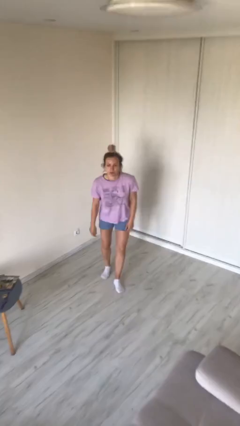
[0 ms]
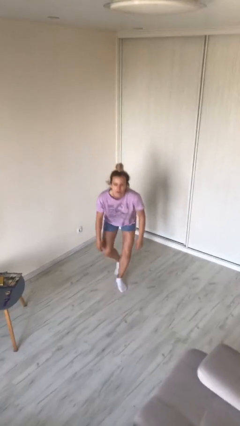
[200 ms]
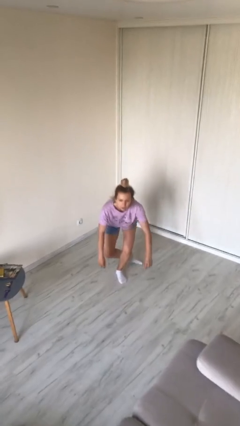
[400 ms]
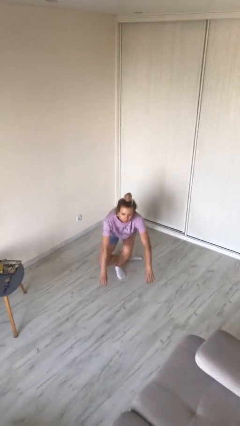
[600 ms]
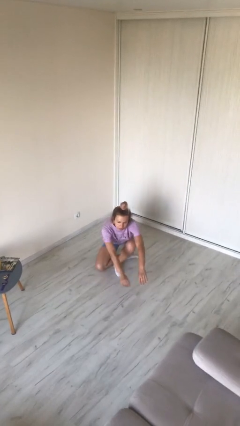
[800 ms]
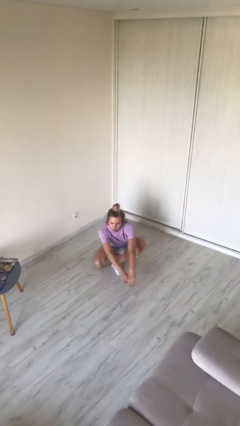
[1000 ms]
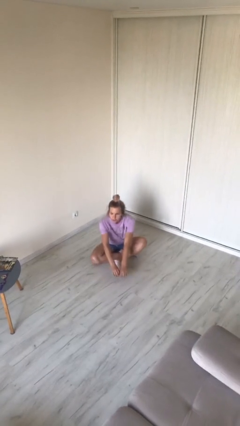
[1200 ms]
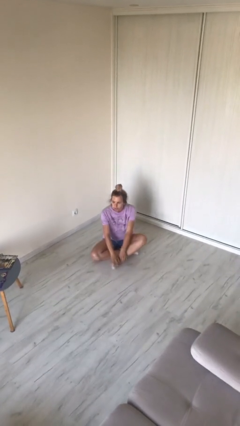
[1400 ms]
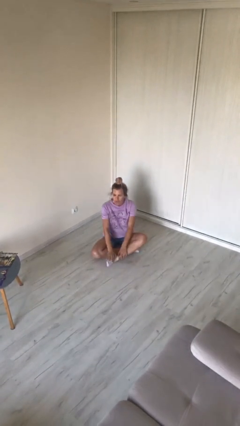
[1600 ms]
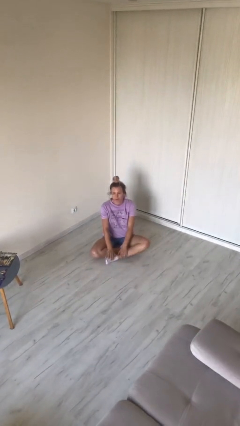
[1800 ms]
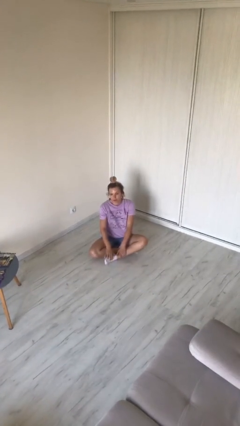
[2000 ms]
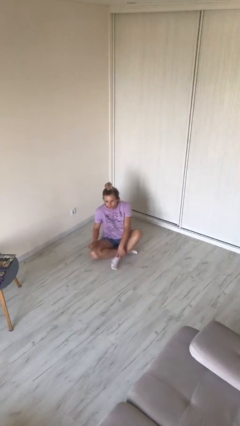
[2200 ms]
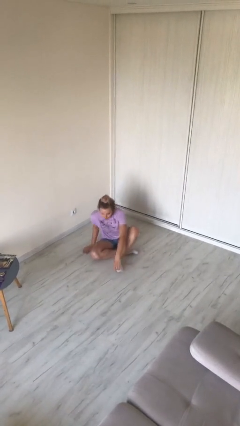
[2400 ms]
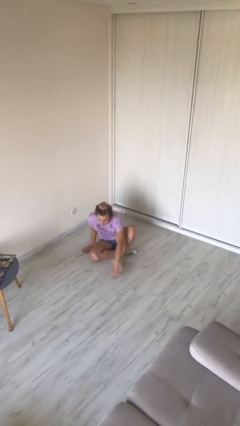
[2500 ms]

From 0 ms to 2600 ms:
person sits crisscross

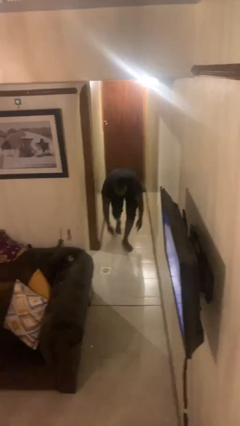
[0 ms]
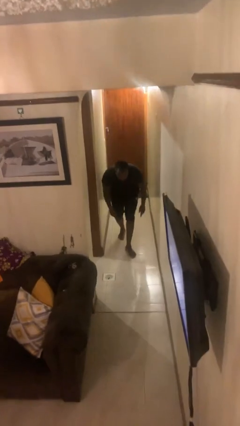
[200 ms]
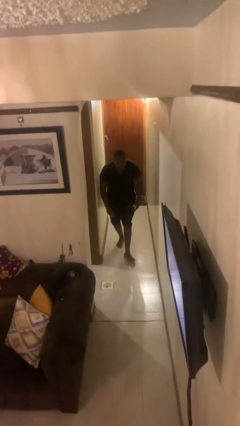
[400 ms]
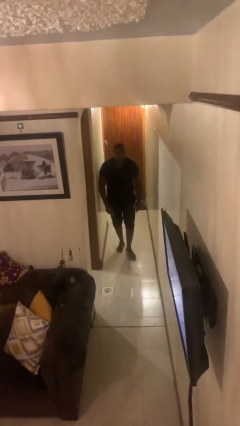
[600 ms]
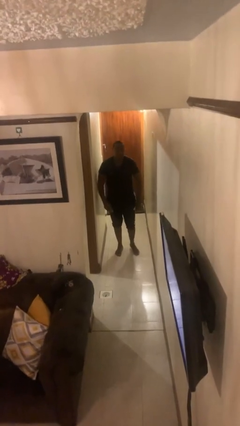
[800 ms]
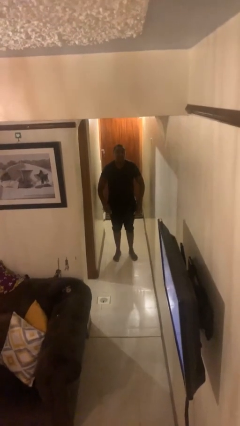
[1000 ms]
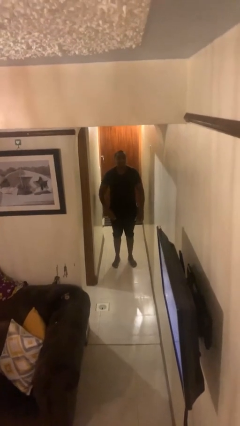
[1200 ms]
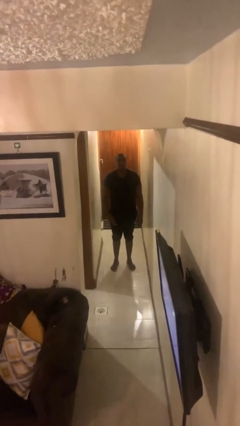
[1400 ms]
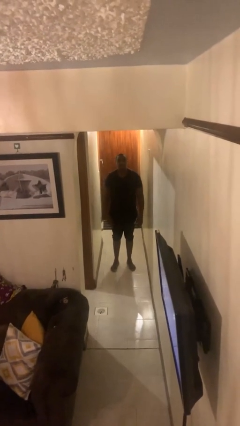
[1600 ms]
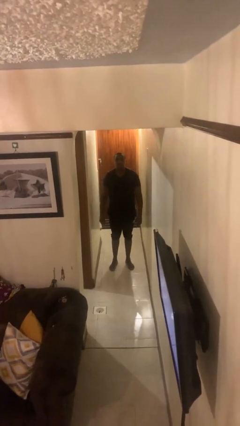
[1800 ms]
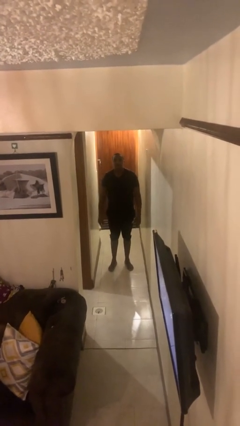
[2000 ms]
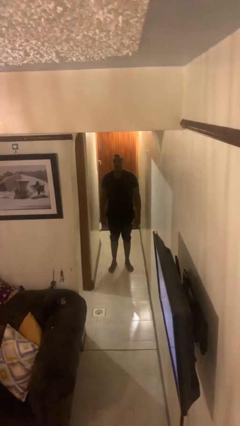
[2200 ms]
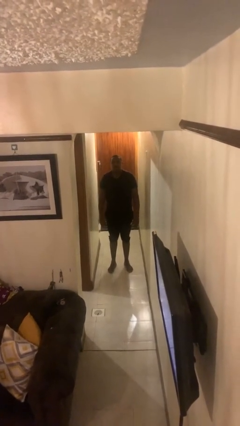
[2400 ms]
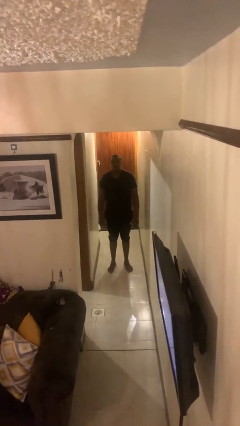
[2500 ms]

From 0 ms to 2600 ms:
person stands up from floor

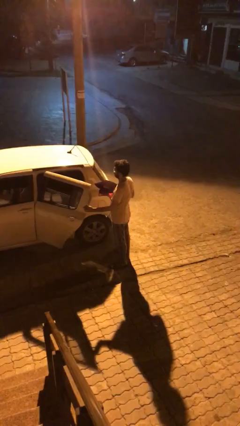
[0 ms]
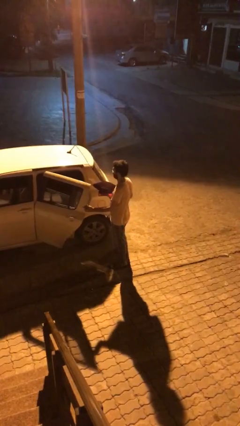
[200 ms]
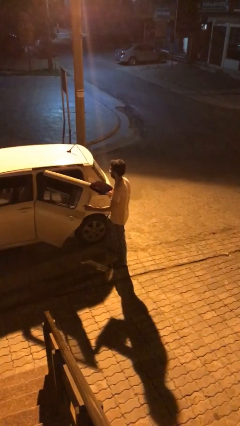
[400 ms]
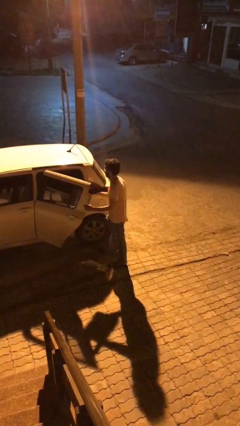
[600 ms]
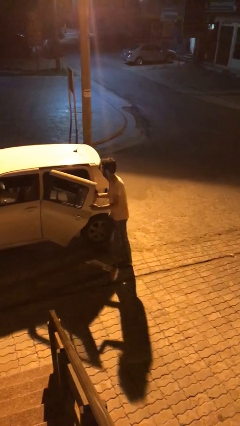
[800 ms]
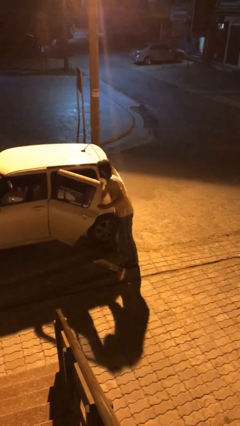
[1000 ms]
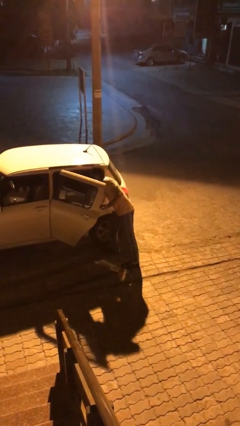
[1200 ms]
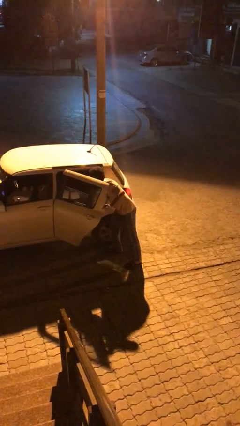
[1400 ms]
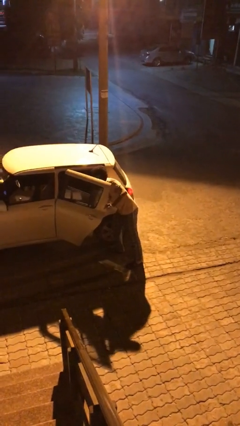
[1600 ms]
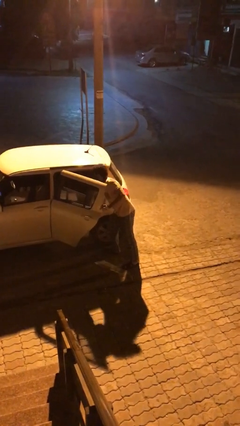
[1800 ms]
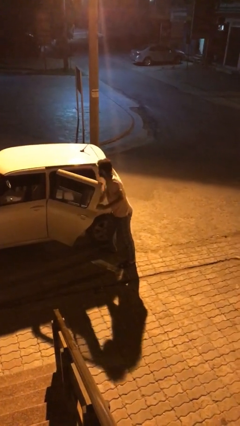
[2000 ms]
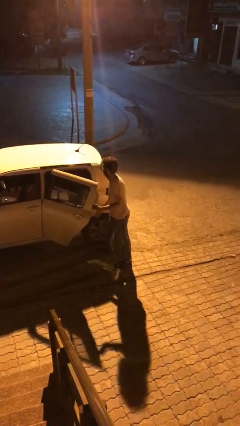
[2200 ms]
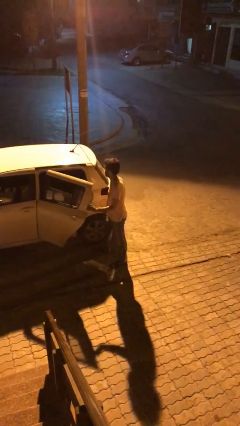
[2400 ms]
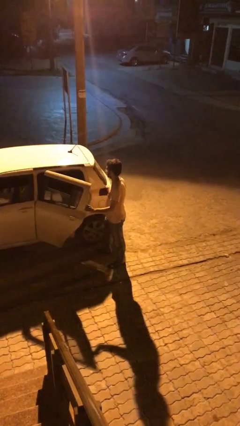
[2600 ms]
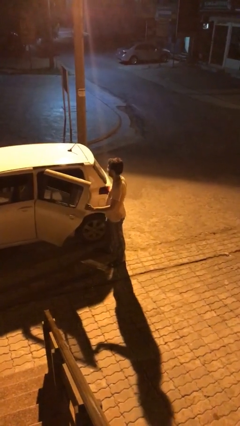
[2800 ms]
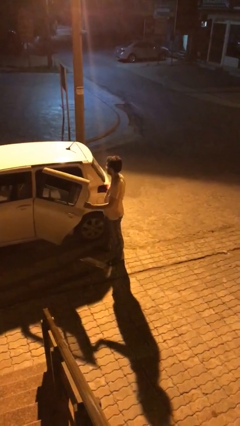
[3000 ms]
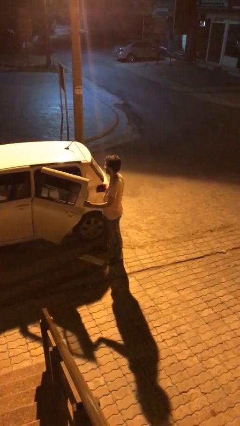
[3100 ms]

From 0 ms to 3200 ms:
person loads car

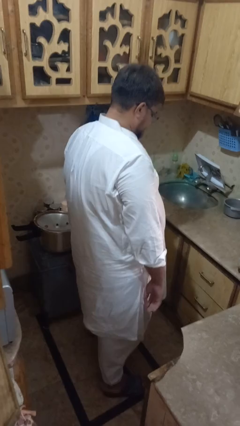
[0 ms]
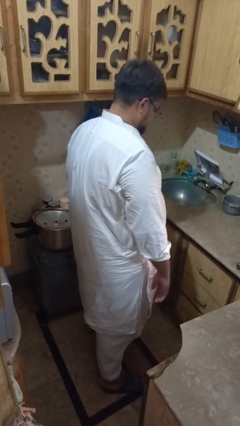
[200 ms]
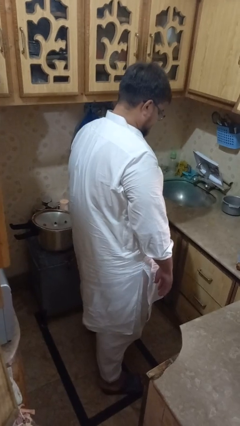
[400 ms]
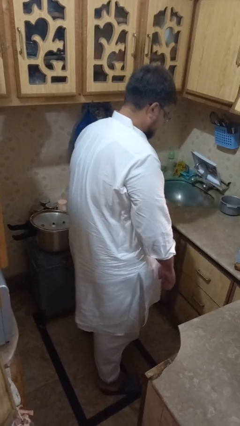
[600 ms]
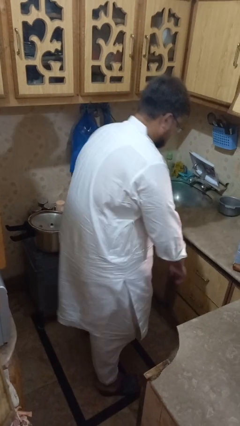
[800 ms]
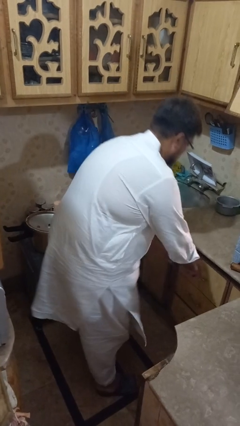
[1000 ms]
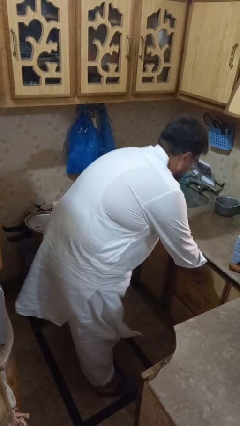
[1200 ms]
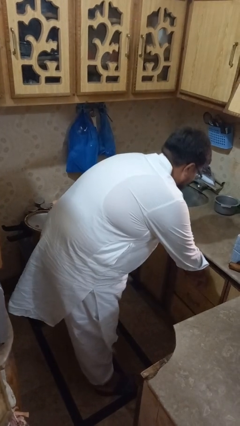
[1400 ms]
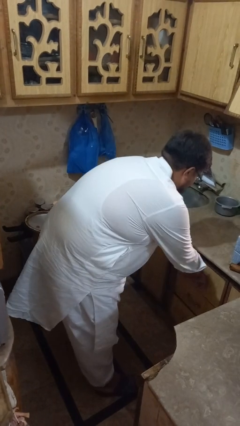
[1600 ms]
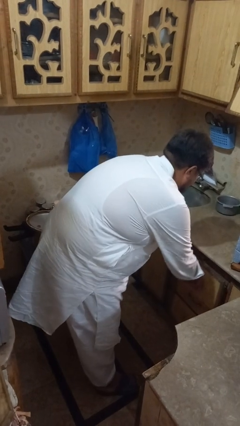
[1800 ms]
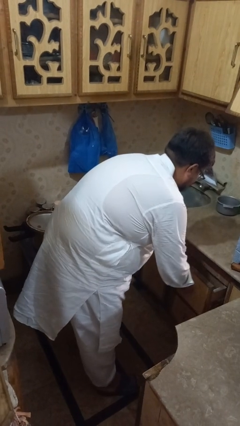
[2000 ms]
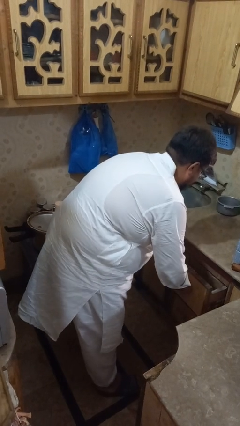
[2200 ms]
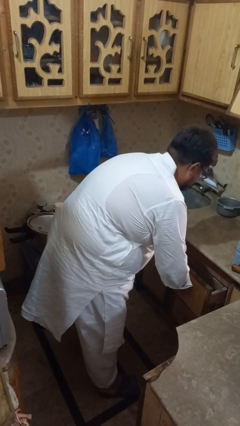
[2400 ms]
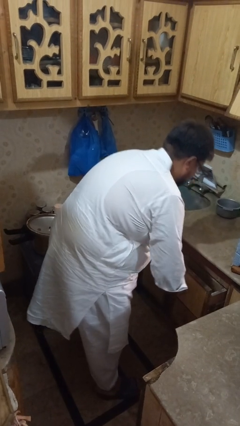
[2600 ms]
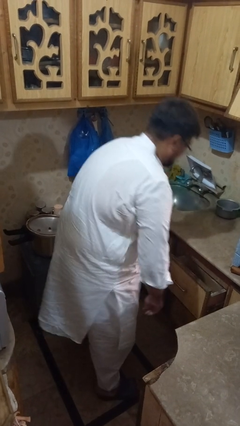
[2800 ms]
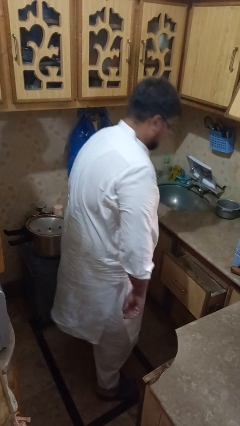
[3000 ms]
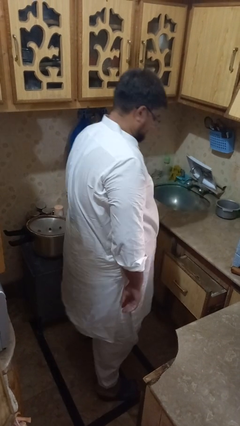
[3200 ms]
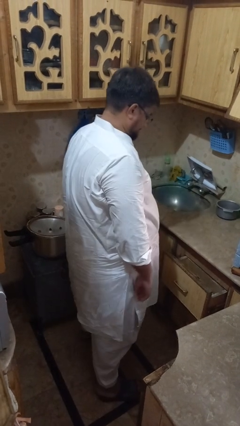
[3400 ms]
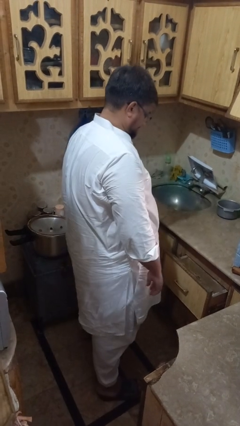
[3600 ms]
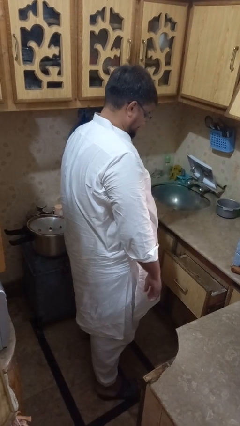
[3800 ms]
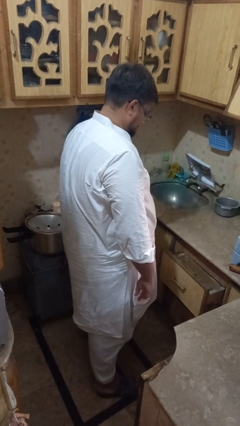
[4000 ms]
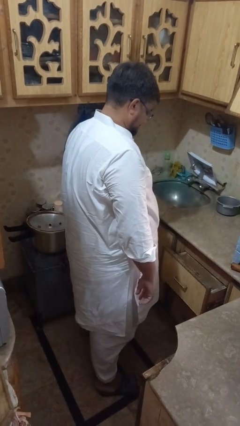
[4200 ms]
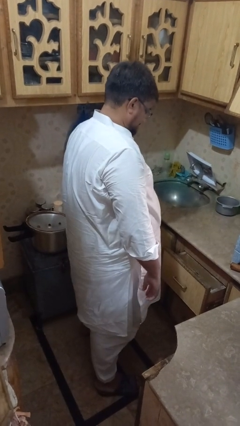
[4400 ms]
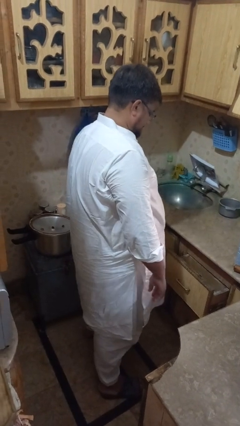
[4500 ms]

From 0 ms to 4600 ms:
person opens kitchen drawer

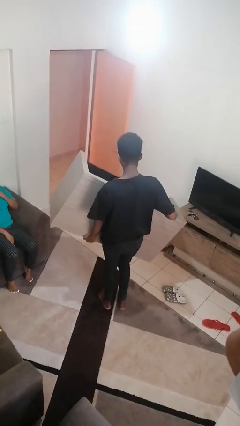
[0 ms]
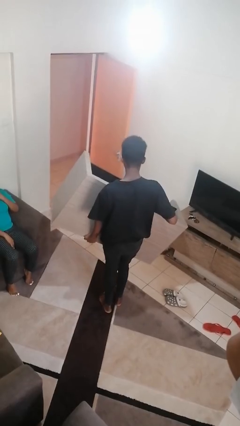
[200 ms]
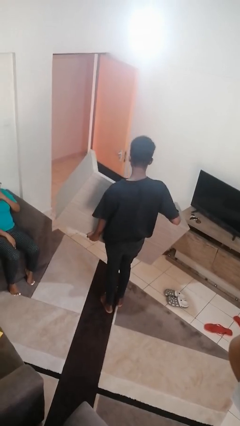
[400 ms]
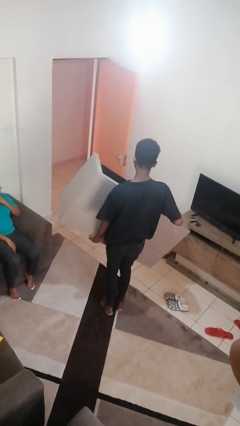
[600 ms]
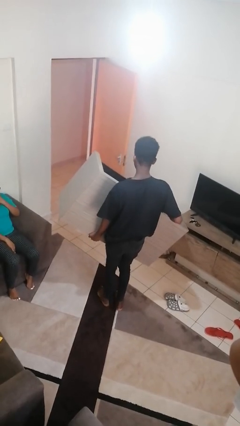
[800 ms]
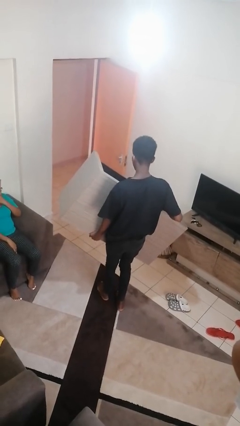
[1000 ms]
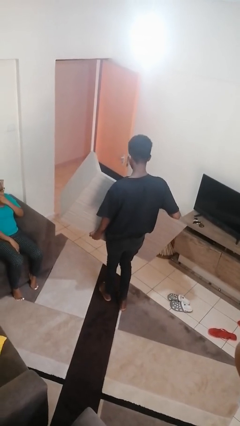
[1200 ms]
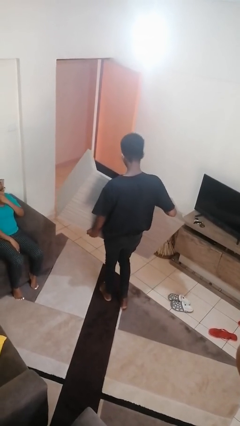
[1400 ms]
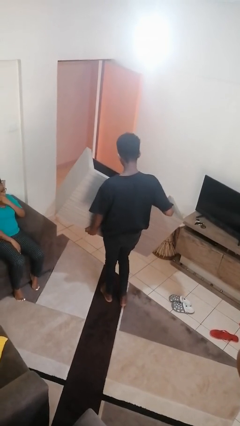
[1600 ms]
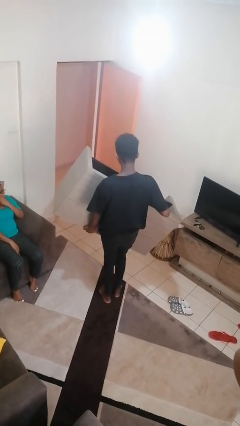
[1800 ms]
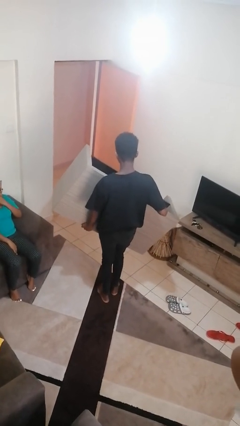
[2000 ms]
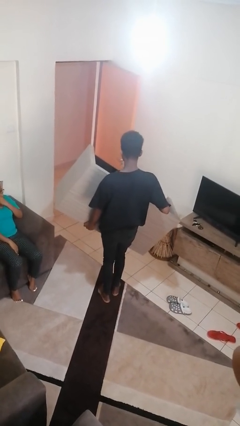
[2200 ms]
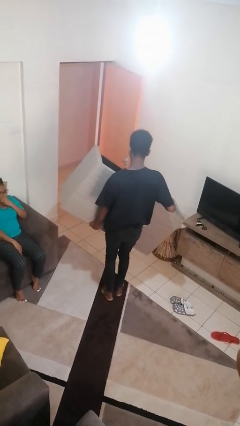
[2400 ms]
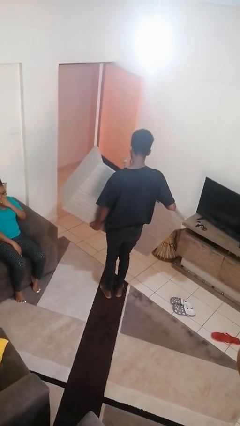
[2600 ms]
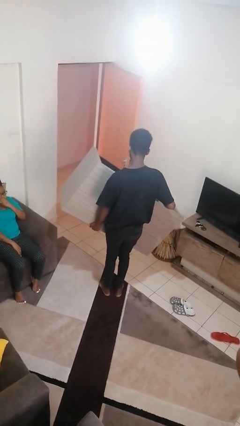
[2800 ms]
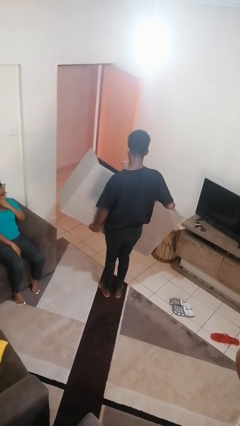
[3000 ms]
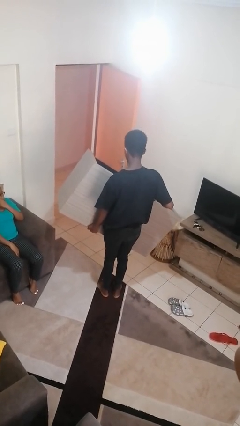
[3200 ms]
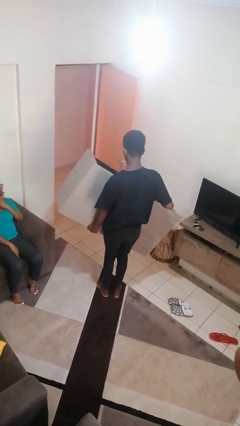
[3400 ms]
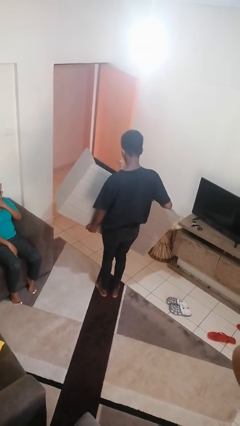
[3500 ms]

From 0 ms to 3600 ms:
person carries furniture

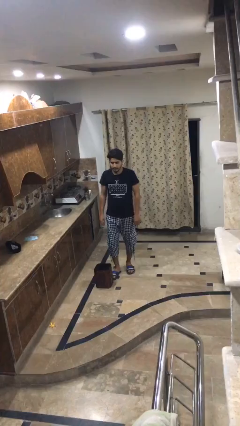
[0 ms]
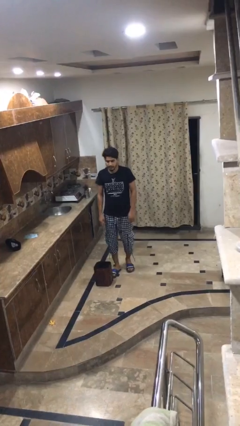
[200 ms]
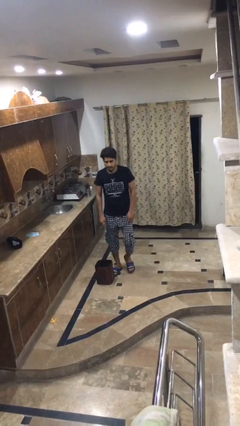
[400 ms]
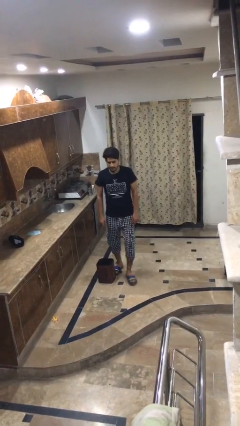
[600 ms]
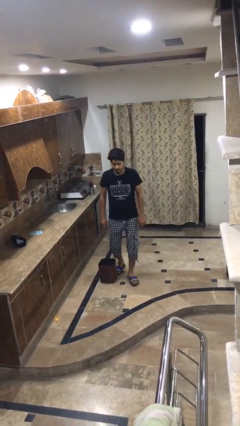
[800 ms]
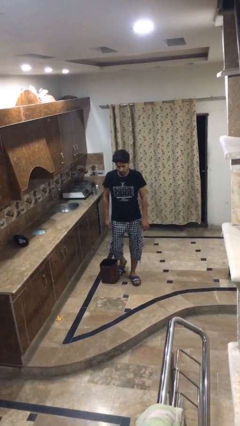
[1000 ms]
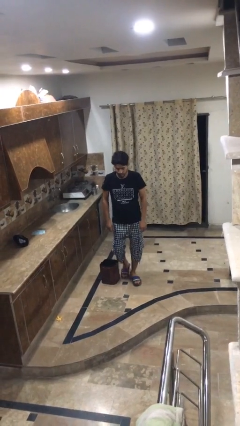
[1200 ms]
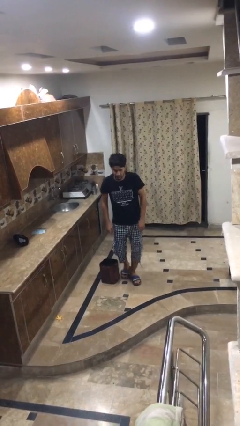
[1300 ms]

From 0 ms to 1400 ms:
person trips on object on floor
